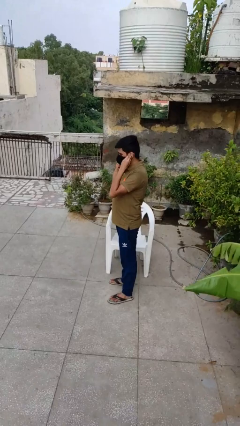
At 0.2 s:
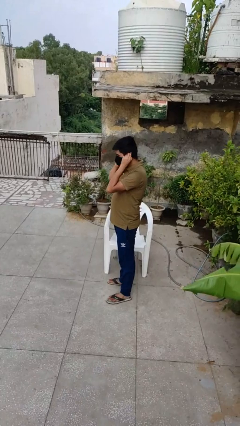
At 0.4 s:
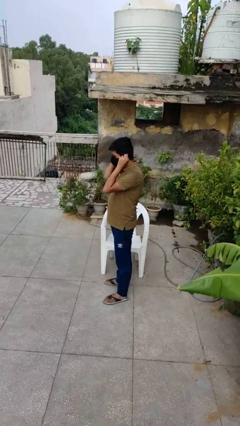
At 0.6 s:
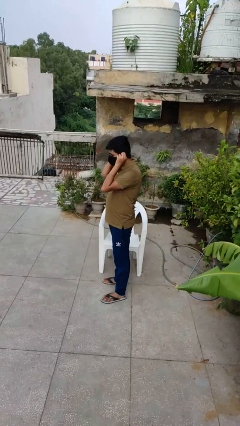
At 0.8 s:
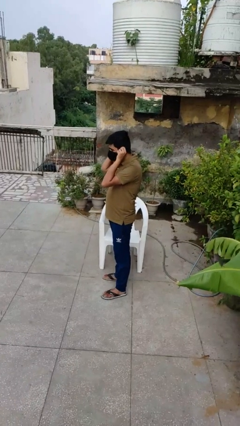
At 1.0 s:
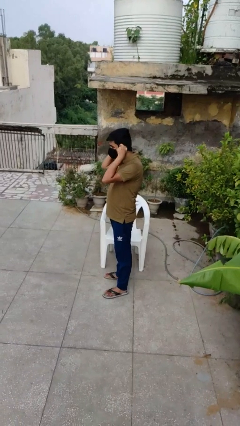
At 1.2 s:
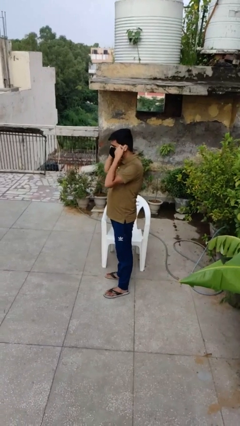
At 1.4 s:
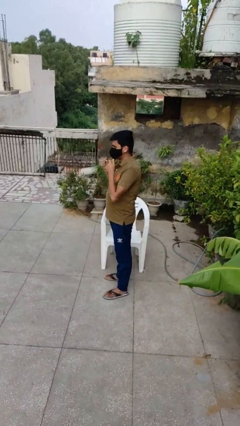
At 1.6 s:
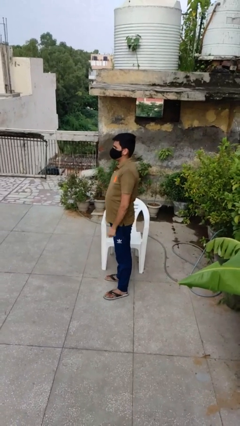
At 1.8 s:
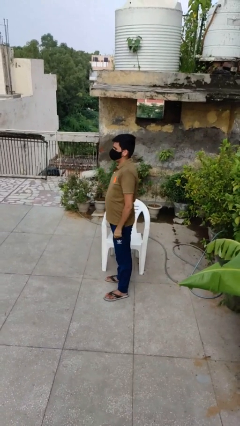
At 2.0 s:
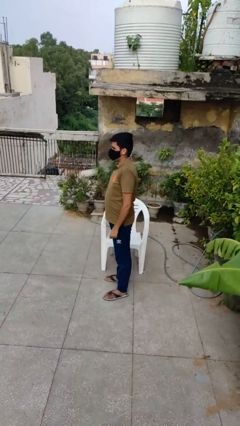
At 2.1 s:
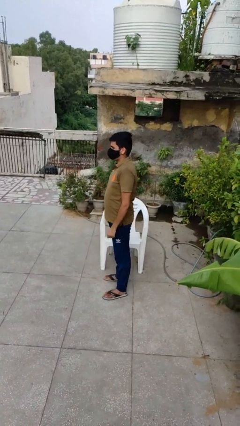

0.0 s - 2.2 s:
person puts on facemask

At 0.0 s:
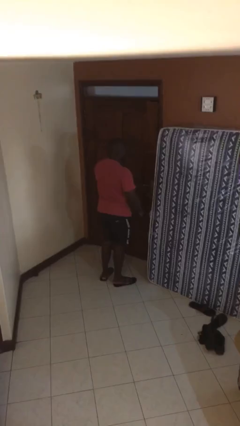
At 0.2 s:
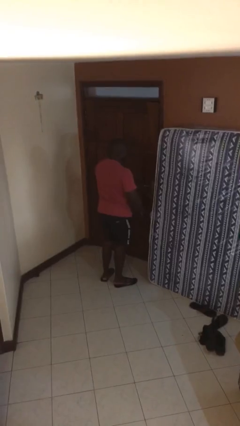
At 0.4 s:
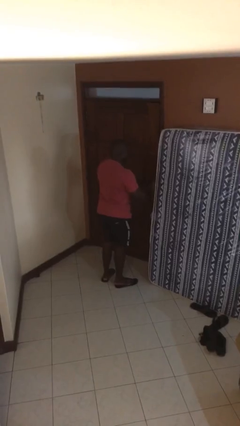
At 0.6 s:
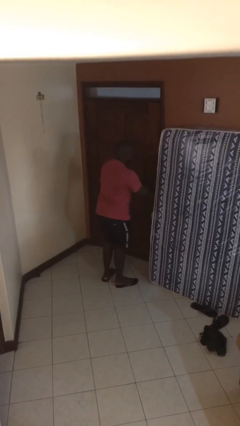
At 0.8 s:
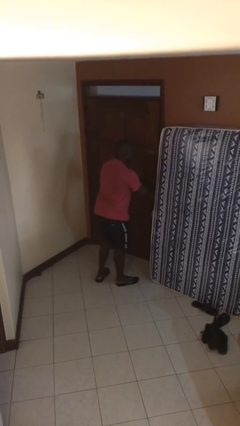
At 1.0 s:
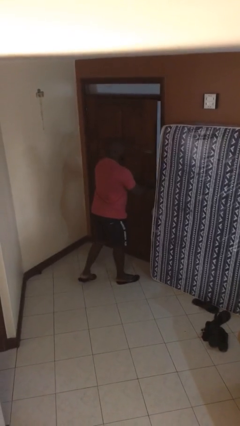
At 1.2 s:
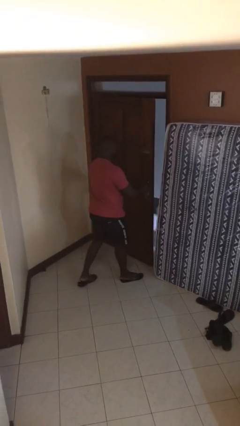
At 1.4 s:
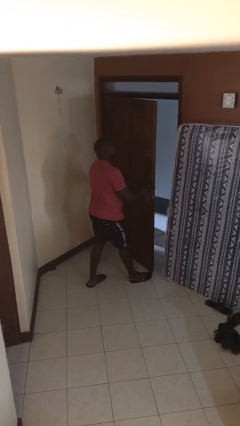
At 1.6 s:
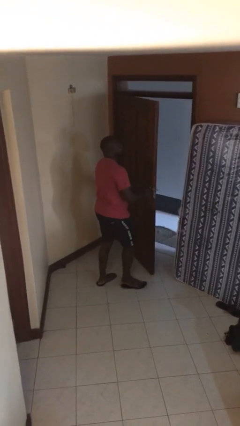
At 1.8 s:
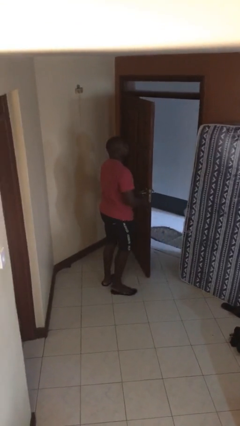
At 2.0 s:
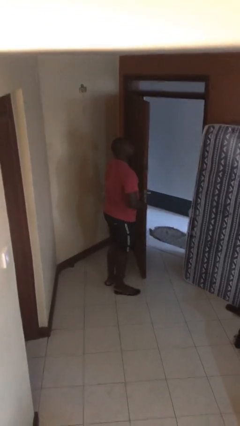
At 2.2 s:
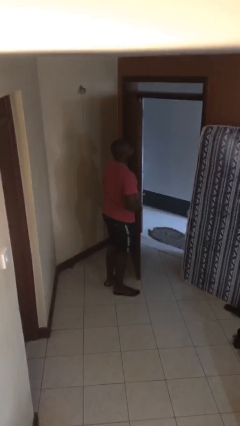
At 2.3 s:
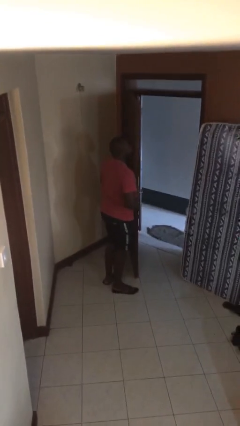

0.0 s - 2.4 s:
person opens facility door

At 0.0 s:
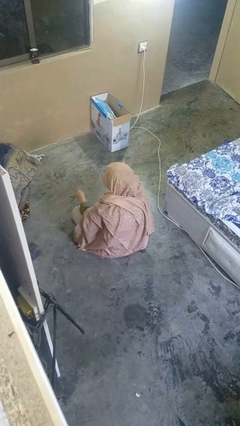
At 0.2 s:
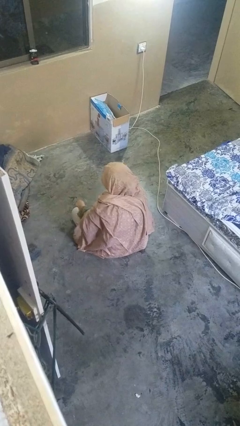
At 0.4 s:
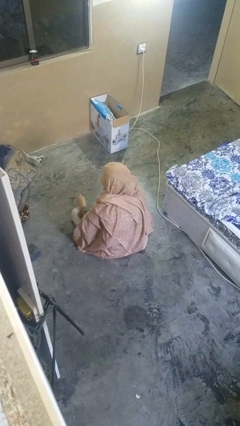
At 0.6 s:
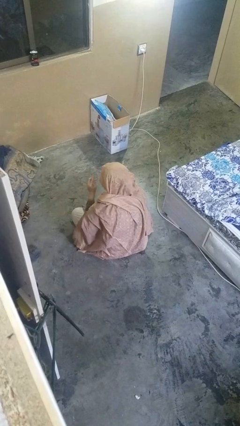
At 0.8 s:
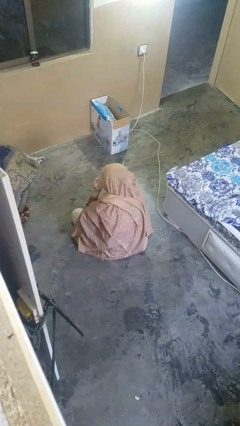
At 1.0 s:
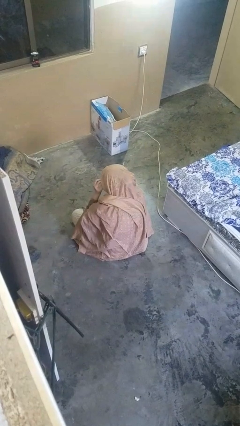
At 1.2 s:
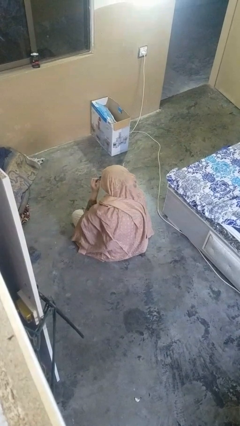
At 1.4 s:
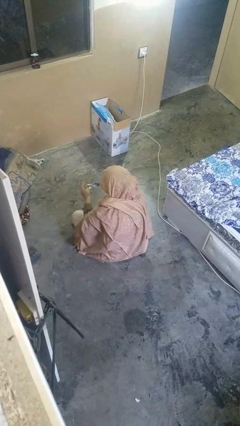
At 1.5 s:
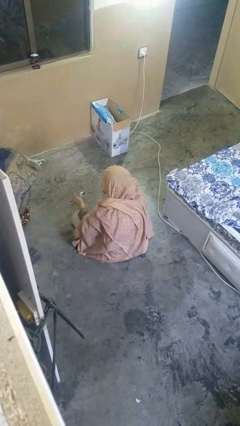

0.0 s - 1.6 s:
person takes off glasses

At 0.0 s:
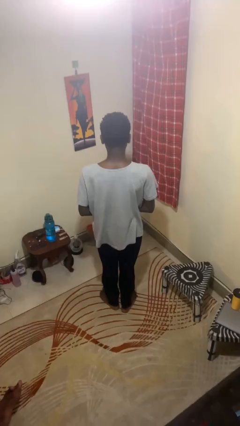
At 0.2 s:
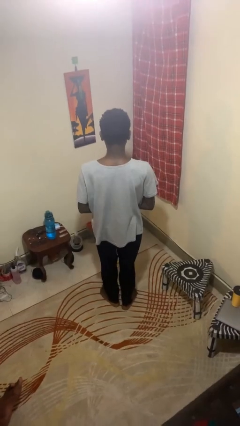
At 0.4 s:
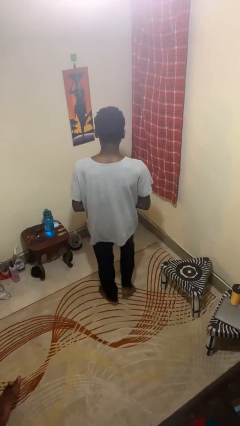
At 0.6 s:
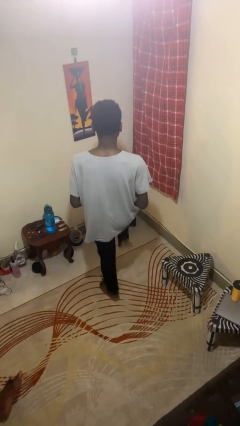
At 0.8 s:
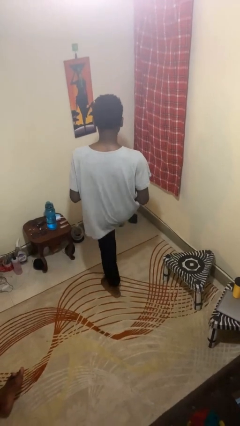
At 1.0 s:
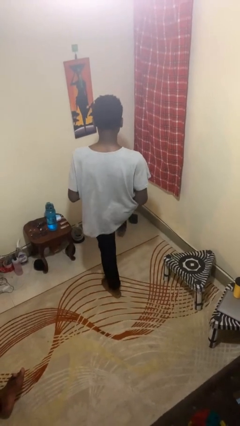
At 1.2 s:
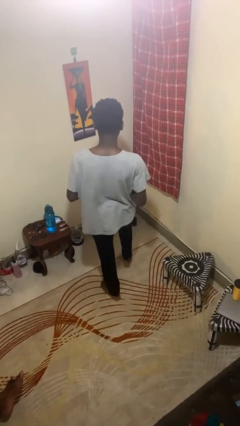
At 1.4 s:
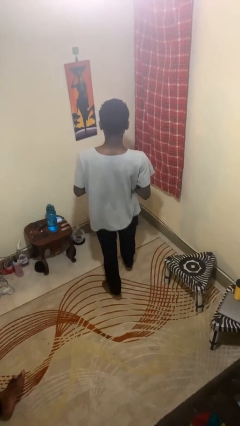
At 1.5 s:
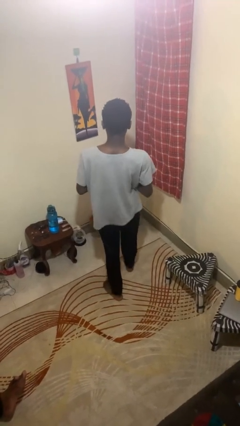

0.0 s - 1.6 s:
person karate kicks

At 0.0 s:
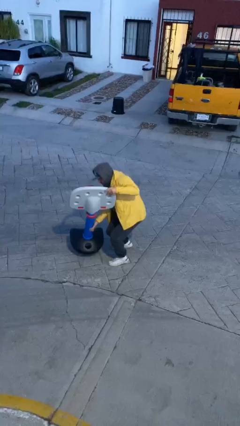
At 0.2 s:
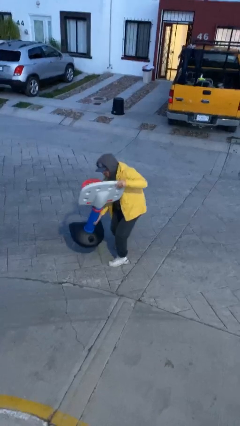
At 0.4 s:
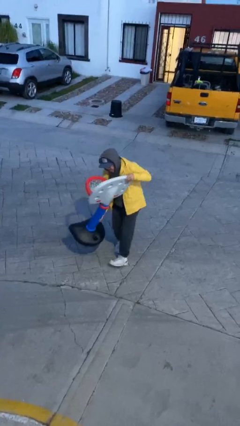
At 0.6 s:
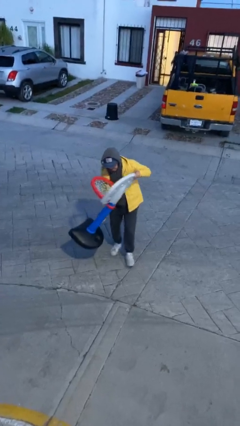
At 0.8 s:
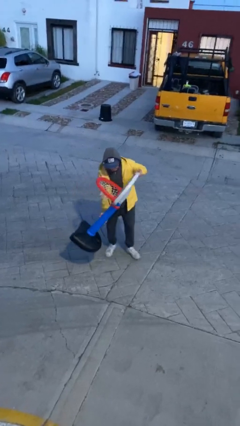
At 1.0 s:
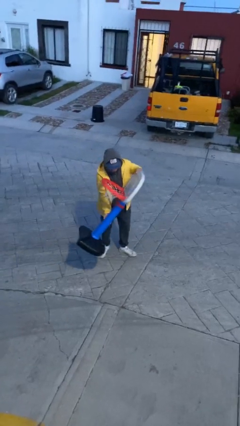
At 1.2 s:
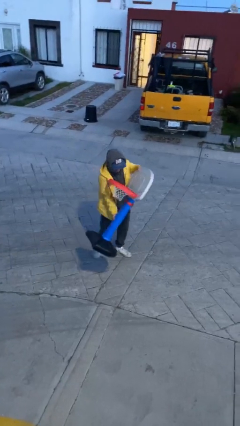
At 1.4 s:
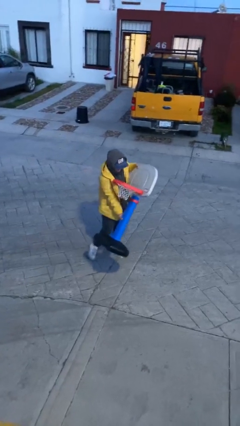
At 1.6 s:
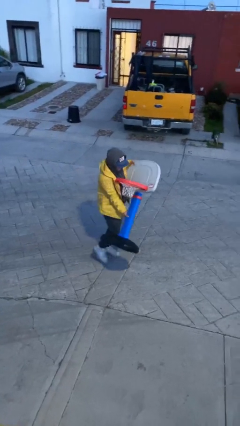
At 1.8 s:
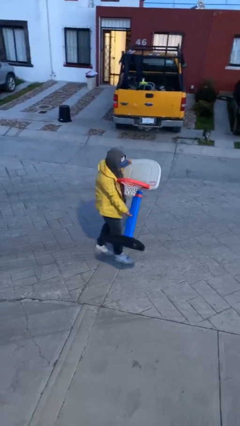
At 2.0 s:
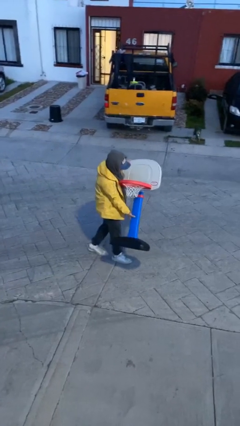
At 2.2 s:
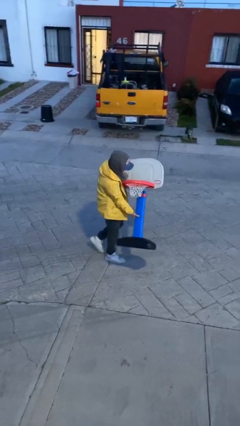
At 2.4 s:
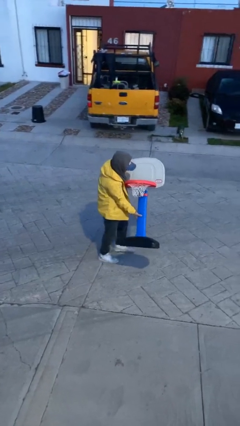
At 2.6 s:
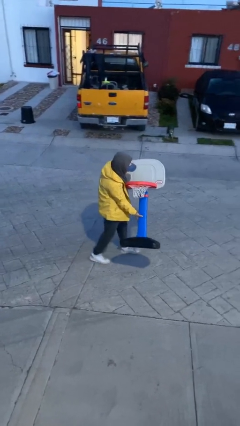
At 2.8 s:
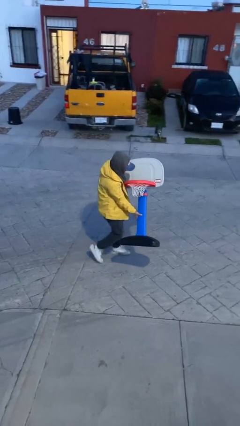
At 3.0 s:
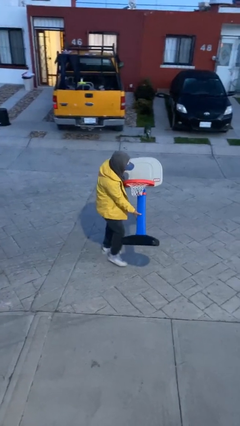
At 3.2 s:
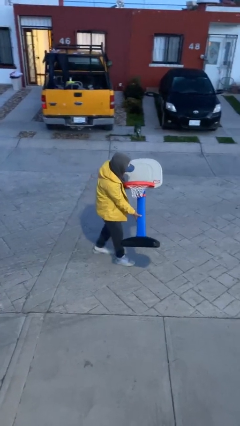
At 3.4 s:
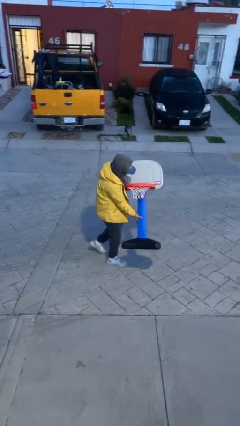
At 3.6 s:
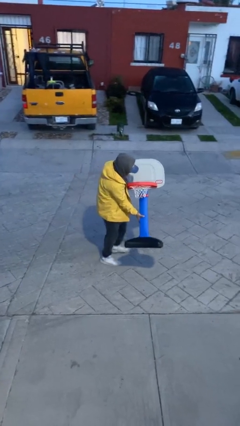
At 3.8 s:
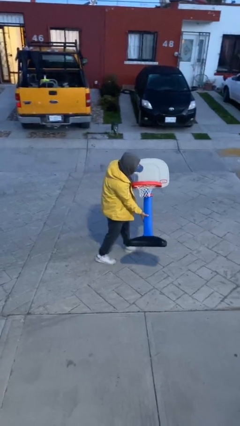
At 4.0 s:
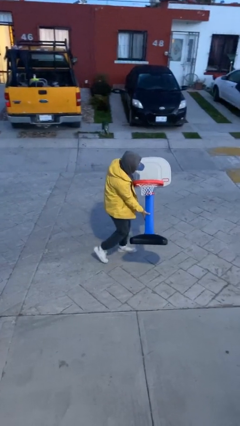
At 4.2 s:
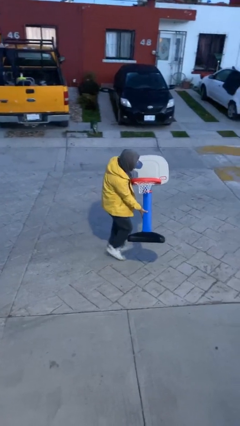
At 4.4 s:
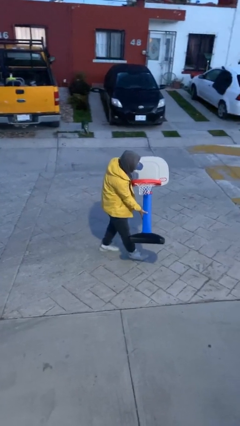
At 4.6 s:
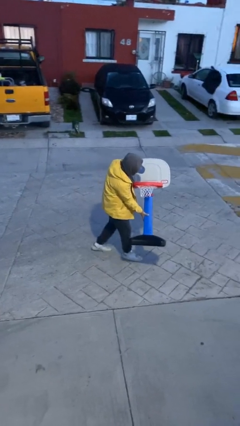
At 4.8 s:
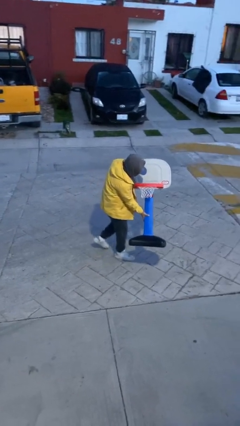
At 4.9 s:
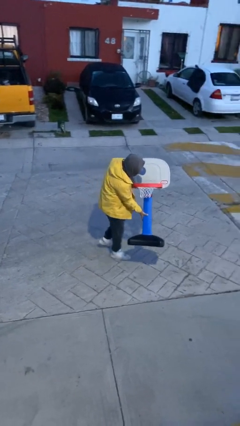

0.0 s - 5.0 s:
person carries heavy object

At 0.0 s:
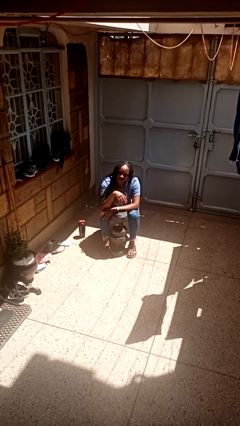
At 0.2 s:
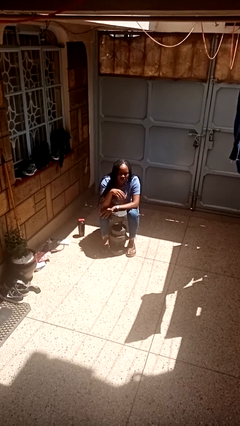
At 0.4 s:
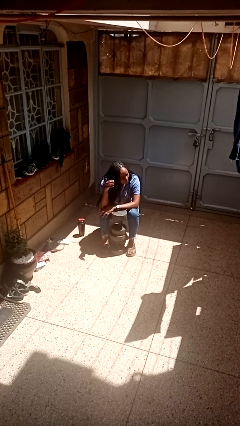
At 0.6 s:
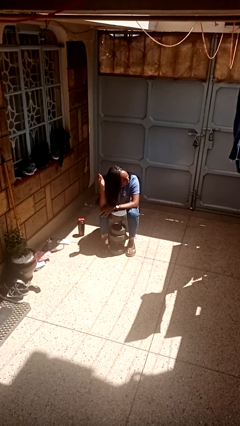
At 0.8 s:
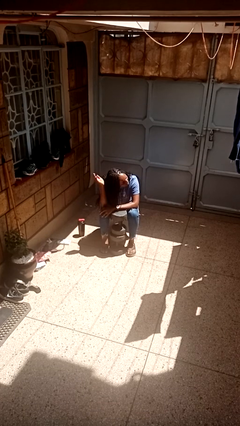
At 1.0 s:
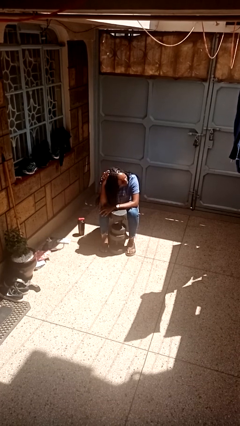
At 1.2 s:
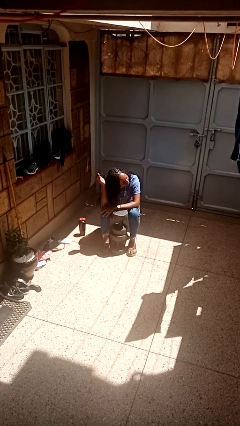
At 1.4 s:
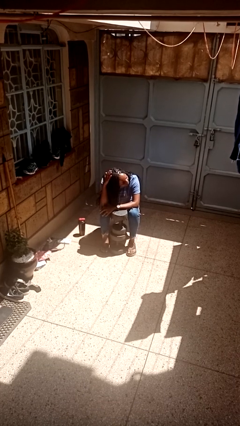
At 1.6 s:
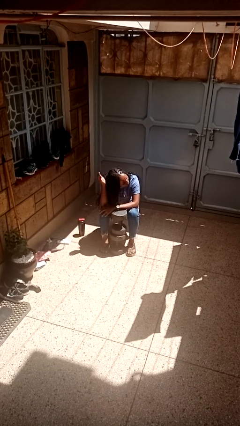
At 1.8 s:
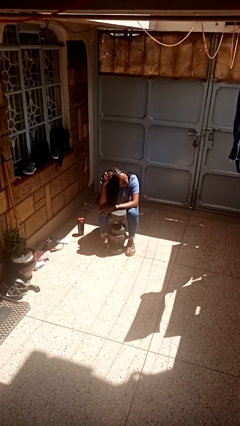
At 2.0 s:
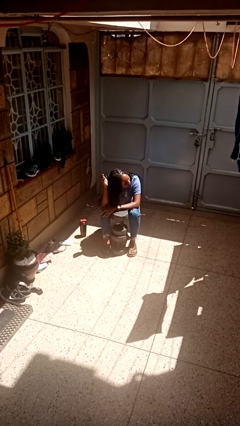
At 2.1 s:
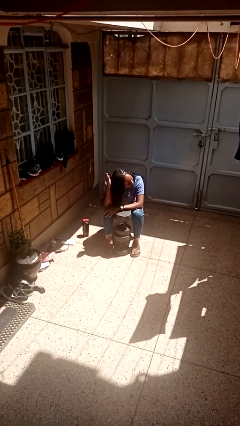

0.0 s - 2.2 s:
person pats head

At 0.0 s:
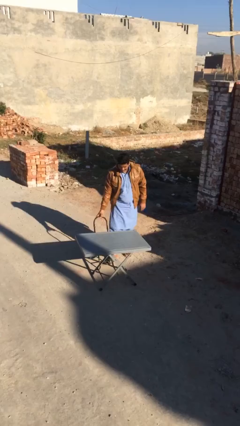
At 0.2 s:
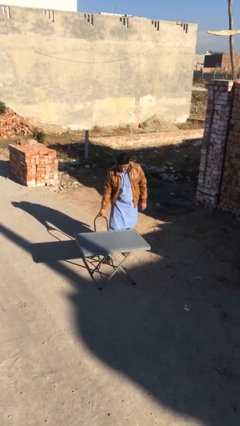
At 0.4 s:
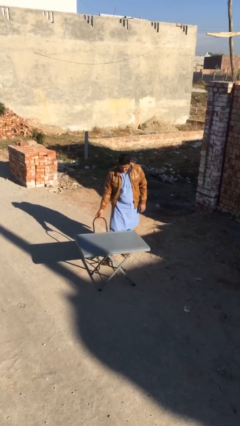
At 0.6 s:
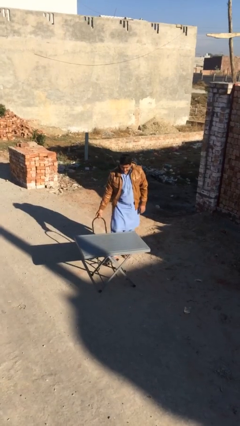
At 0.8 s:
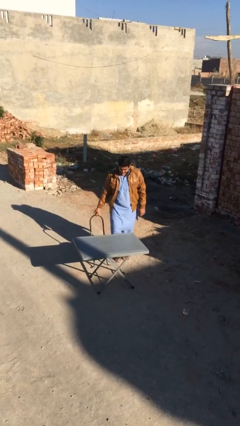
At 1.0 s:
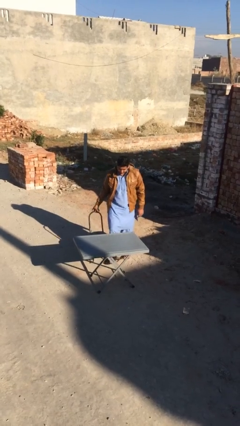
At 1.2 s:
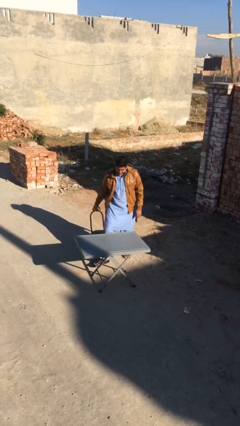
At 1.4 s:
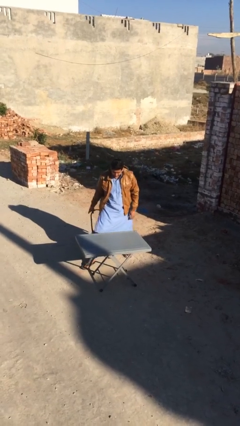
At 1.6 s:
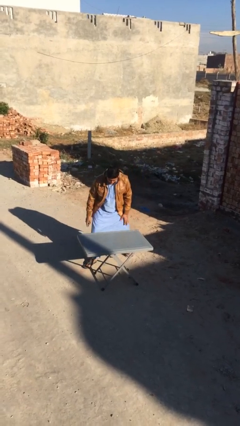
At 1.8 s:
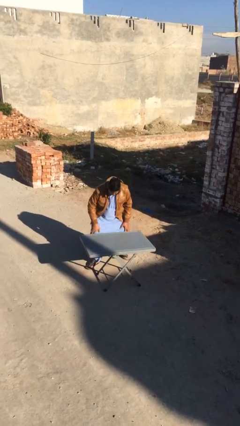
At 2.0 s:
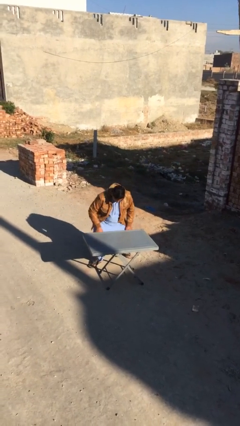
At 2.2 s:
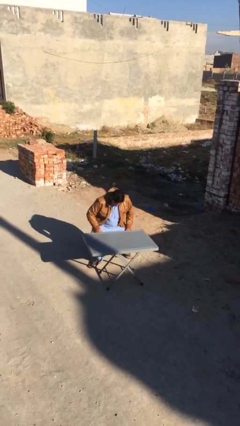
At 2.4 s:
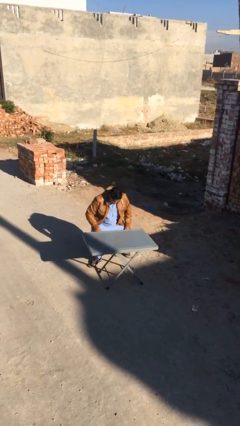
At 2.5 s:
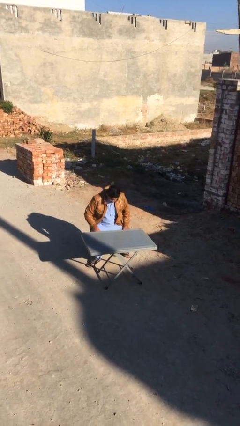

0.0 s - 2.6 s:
person sits down
